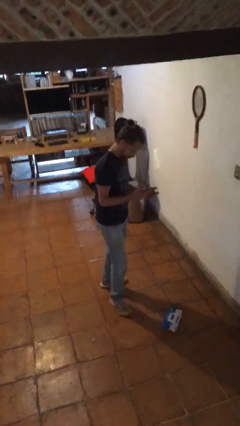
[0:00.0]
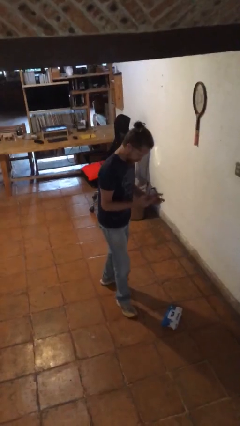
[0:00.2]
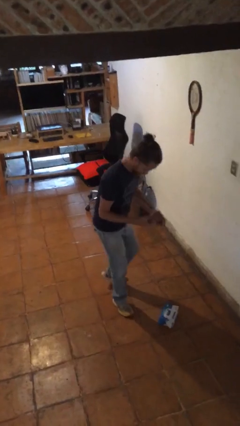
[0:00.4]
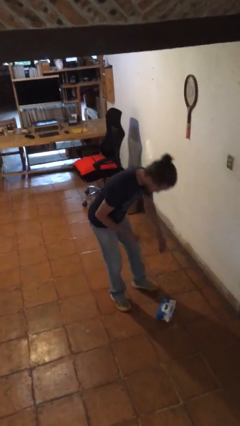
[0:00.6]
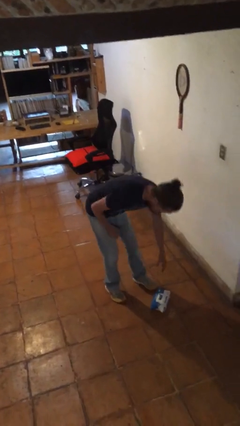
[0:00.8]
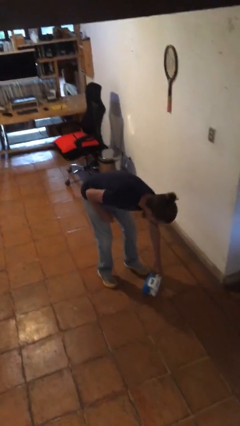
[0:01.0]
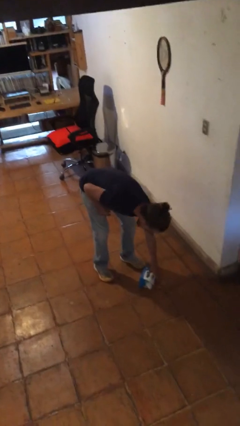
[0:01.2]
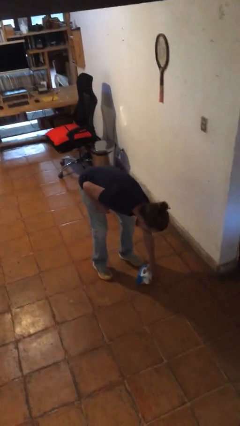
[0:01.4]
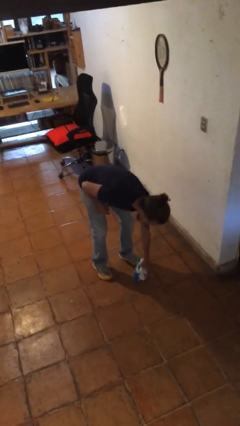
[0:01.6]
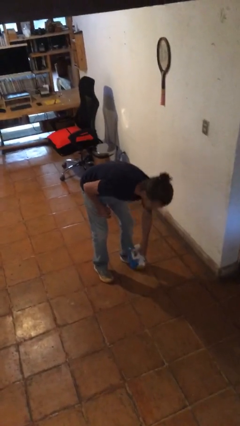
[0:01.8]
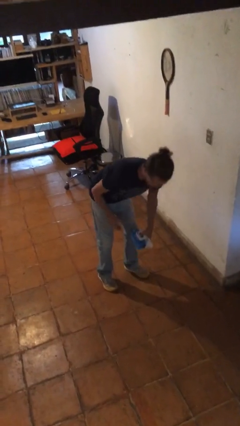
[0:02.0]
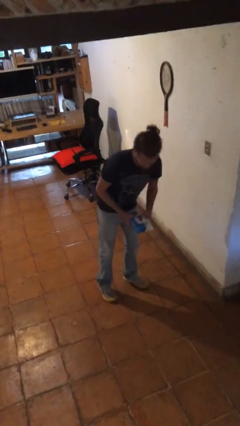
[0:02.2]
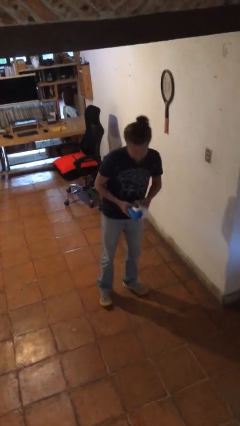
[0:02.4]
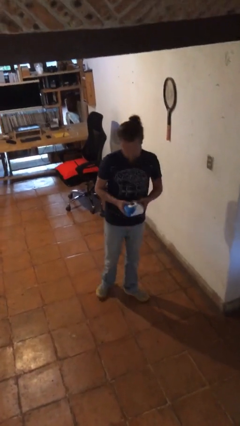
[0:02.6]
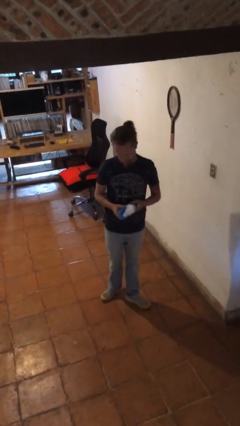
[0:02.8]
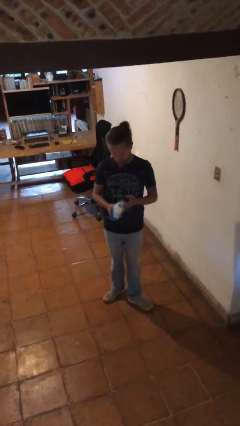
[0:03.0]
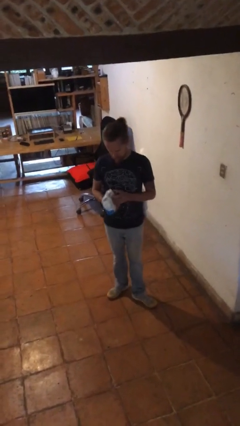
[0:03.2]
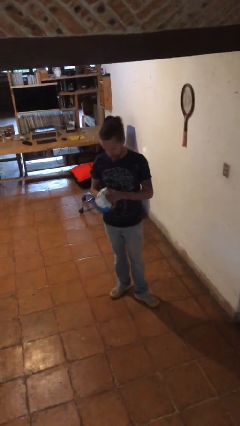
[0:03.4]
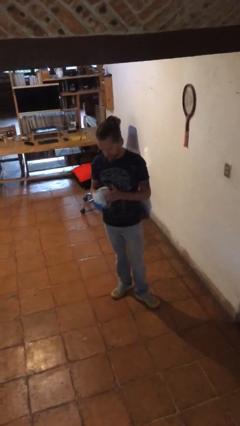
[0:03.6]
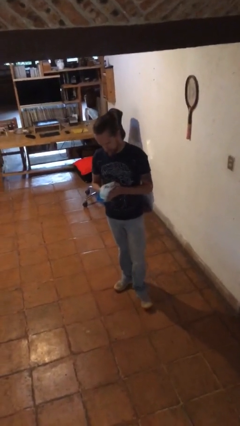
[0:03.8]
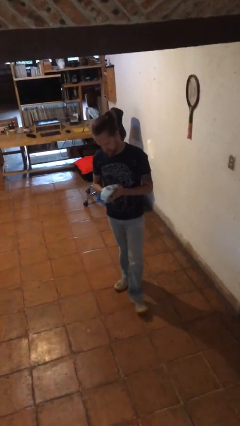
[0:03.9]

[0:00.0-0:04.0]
person picks up object from floor

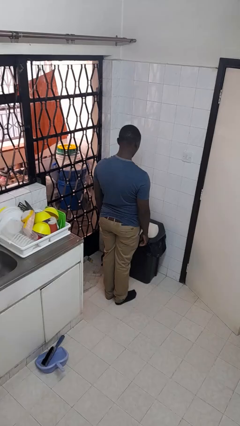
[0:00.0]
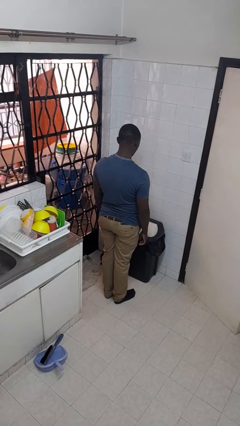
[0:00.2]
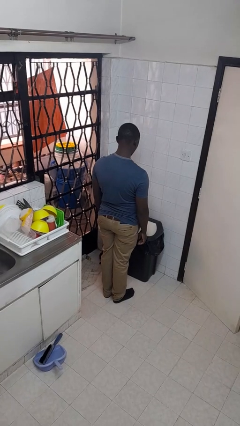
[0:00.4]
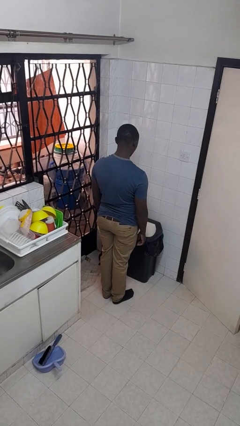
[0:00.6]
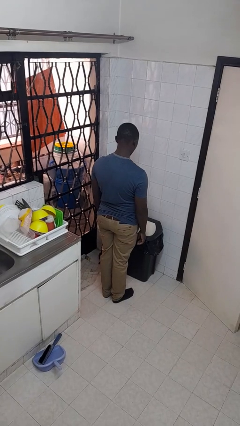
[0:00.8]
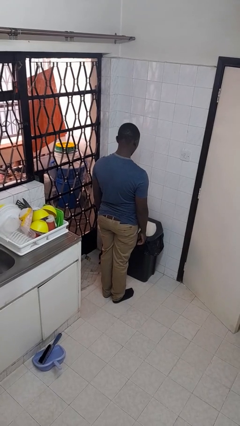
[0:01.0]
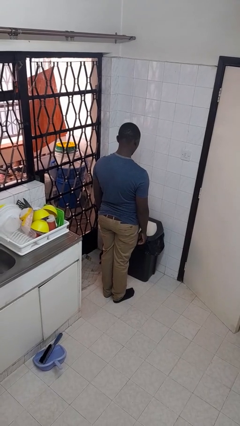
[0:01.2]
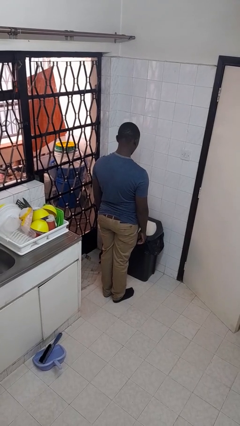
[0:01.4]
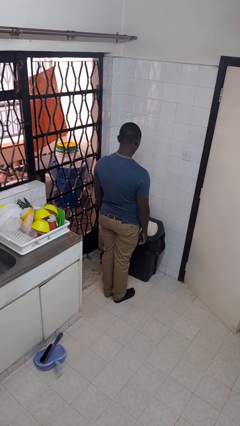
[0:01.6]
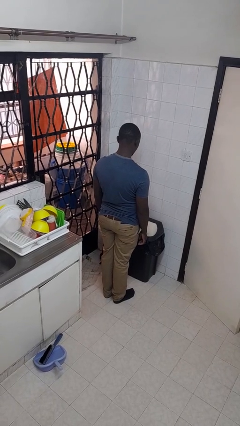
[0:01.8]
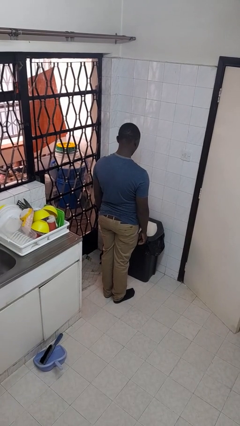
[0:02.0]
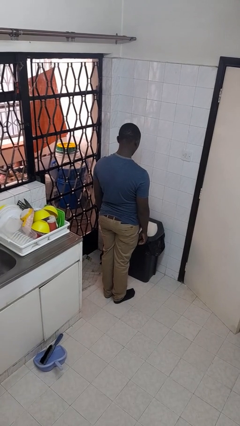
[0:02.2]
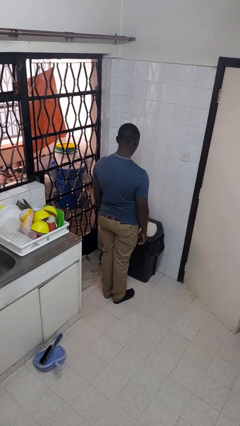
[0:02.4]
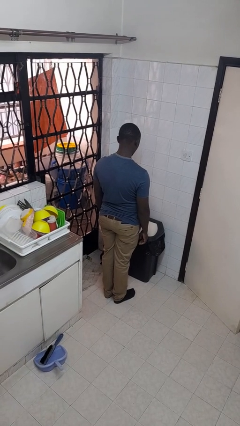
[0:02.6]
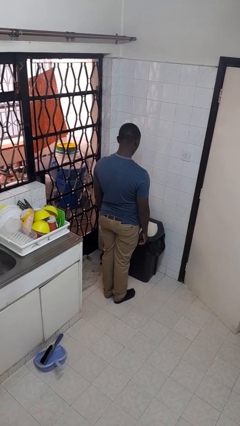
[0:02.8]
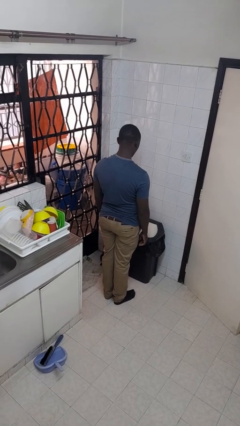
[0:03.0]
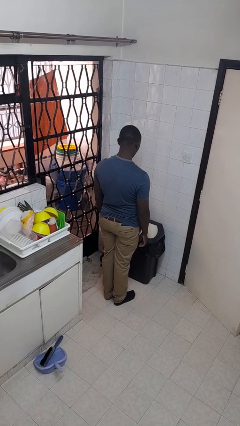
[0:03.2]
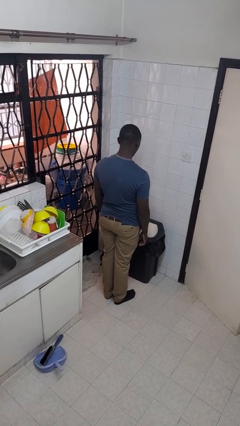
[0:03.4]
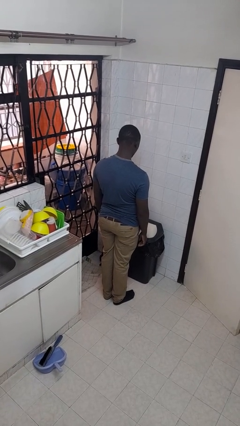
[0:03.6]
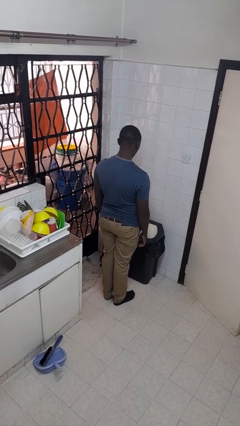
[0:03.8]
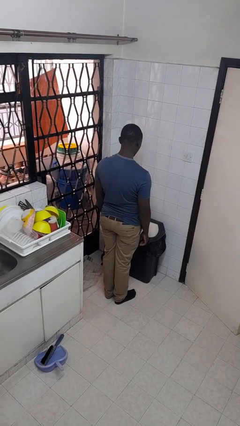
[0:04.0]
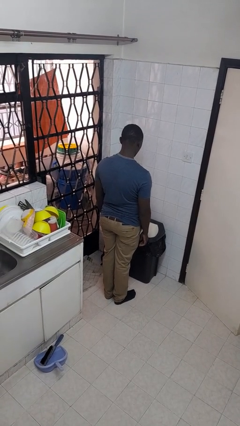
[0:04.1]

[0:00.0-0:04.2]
person removes trashbag from trashcan

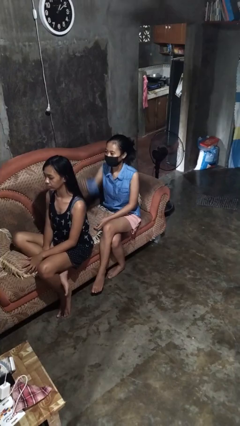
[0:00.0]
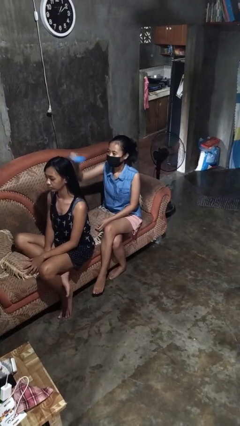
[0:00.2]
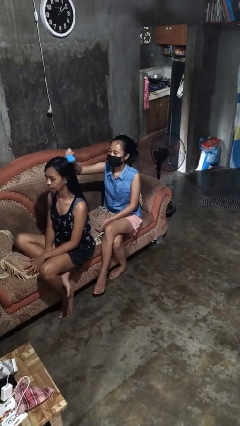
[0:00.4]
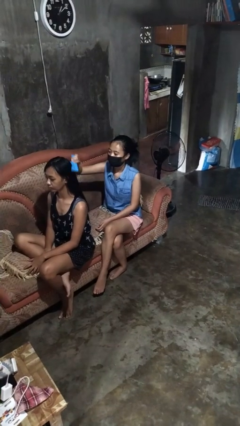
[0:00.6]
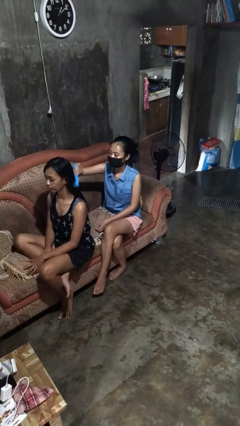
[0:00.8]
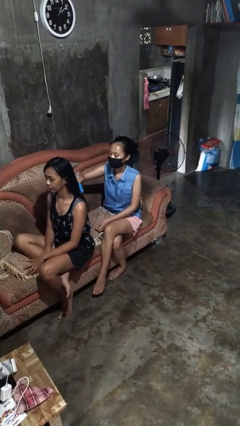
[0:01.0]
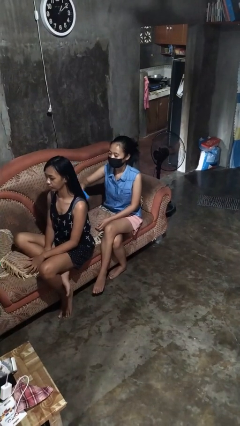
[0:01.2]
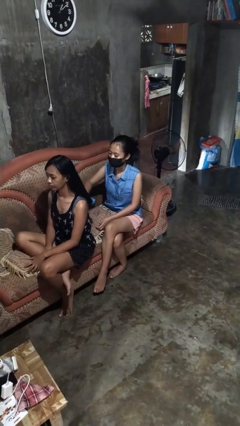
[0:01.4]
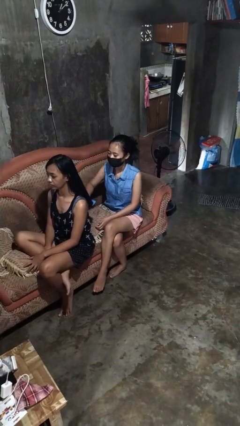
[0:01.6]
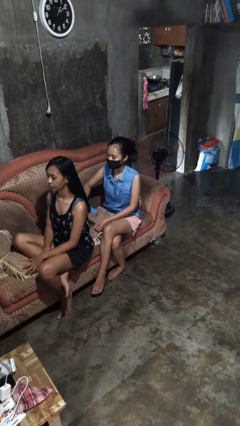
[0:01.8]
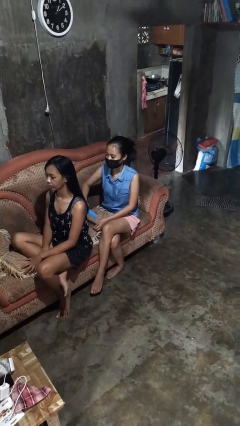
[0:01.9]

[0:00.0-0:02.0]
person brushes hair of person

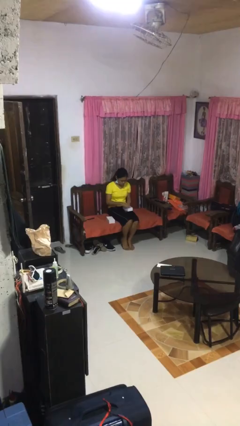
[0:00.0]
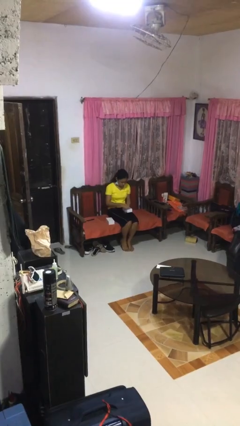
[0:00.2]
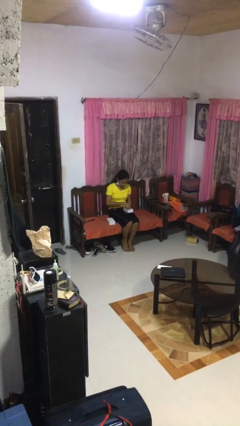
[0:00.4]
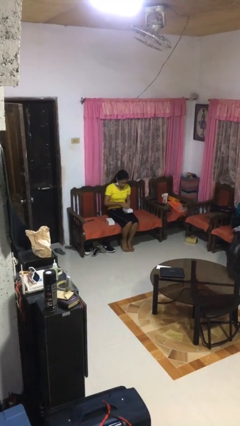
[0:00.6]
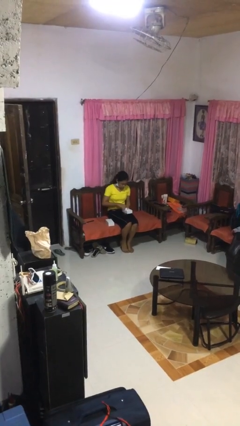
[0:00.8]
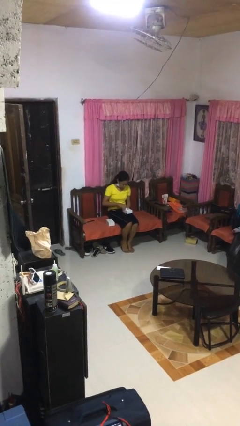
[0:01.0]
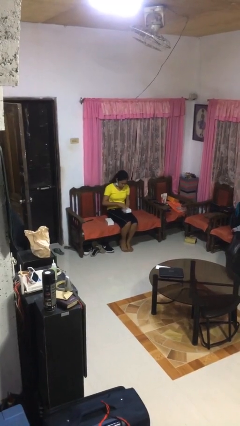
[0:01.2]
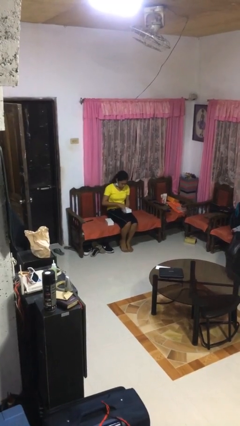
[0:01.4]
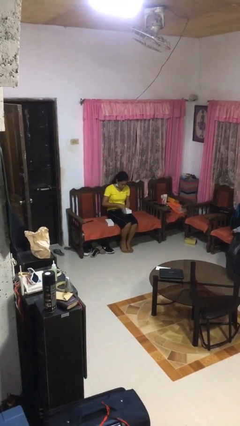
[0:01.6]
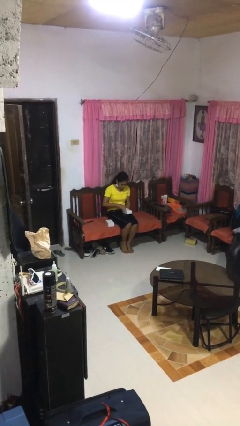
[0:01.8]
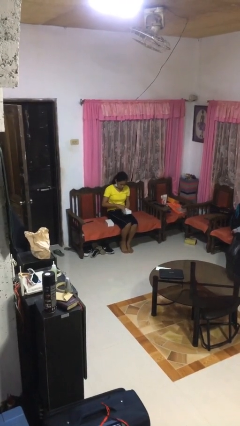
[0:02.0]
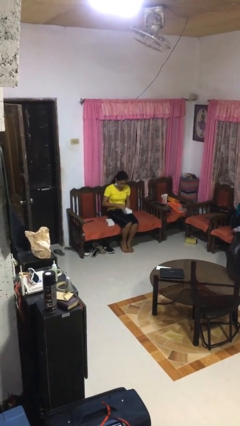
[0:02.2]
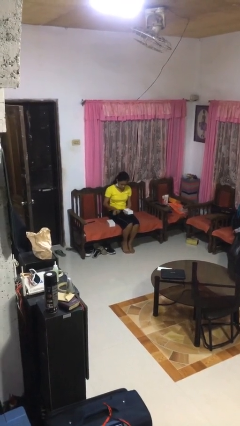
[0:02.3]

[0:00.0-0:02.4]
person searches jewelry box

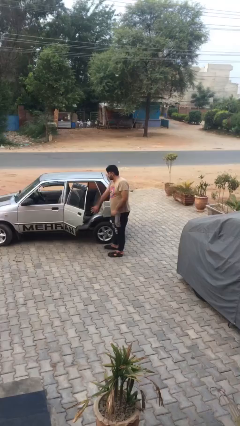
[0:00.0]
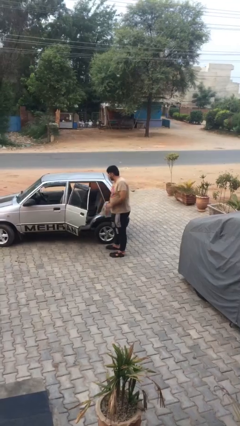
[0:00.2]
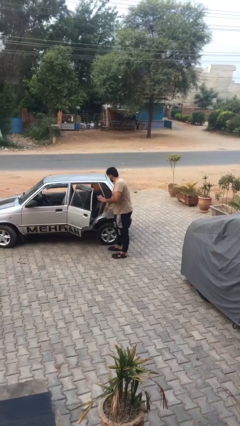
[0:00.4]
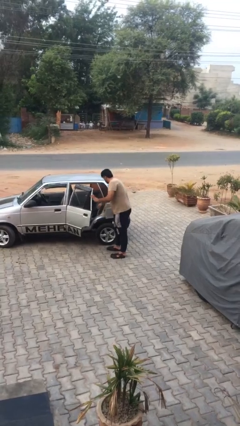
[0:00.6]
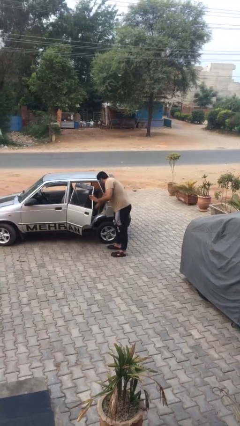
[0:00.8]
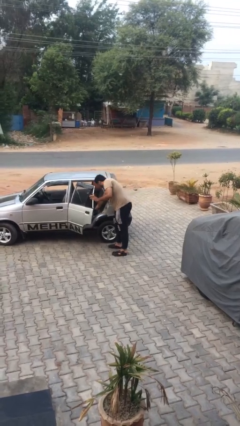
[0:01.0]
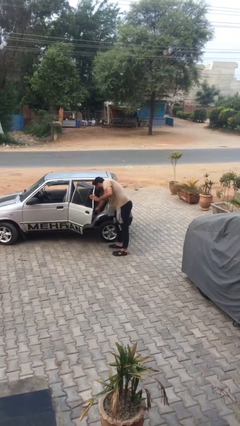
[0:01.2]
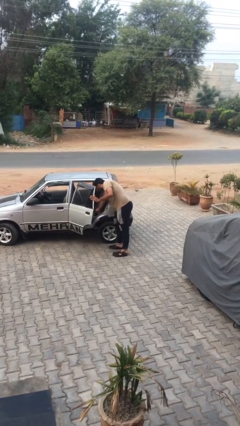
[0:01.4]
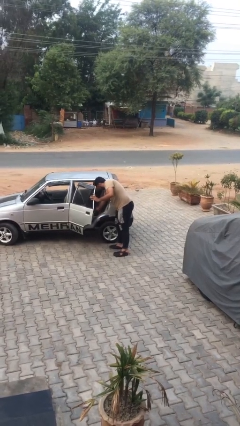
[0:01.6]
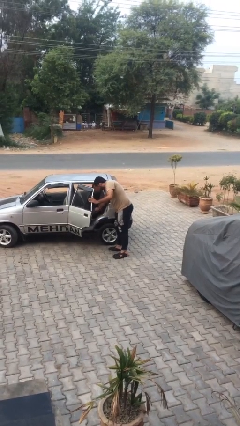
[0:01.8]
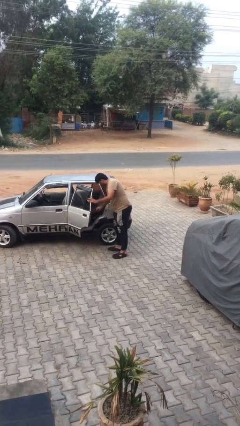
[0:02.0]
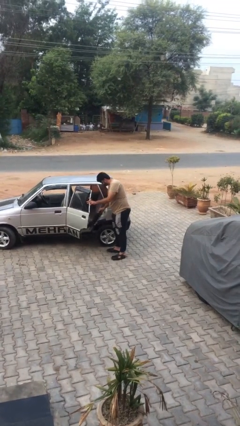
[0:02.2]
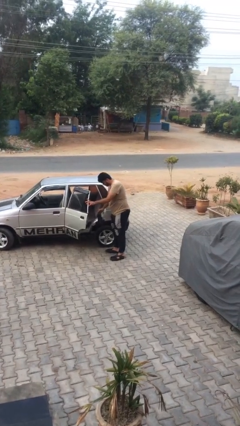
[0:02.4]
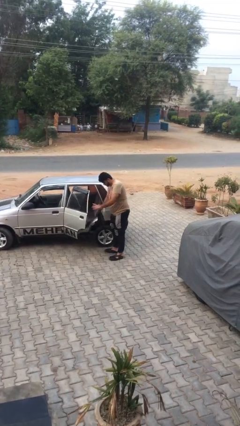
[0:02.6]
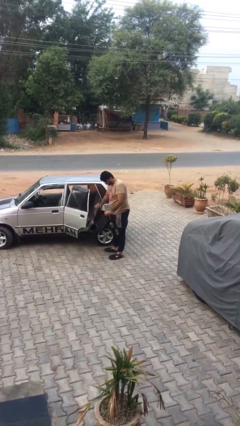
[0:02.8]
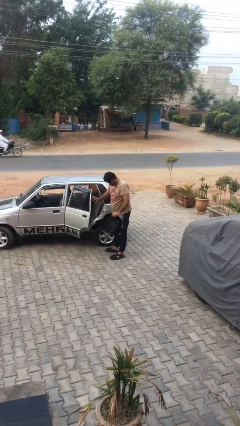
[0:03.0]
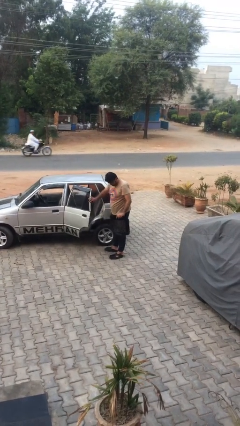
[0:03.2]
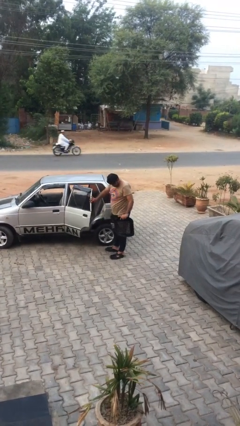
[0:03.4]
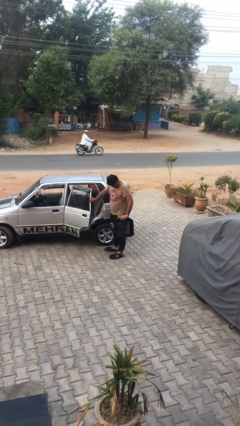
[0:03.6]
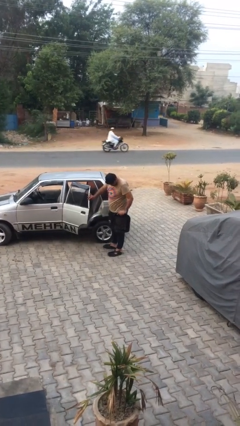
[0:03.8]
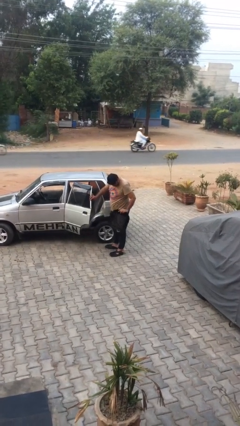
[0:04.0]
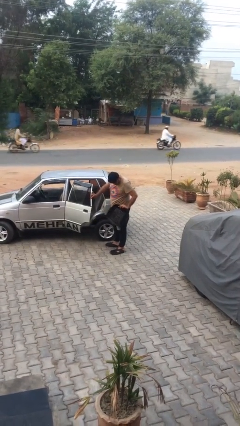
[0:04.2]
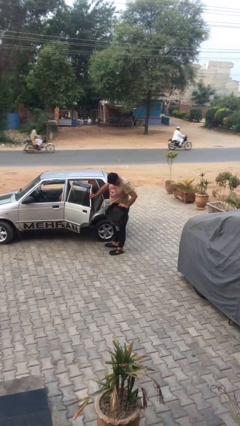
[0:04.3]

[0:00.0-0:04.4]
person unloads car
